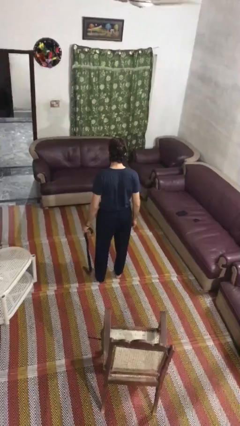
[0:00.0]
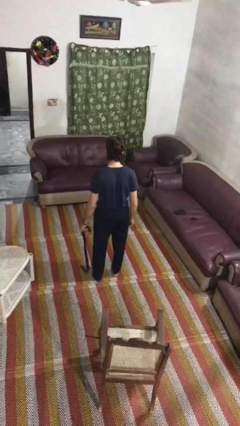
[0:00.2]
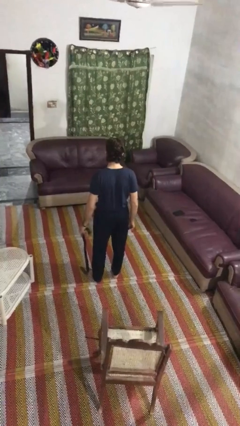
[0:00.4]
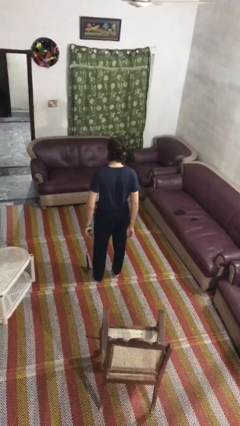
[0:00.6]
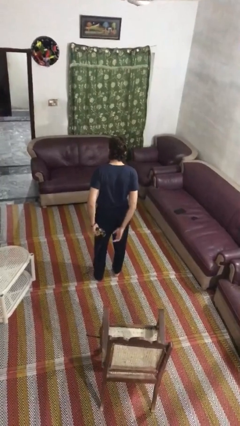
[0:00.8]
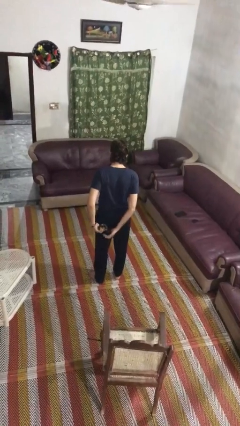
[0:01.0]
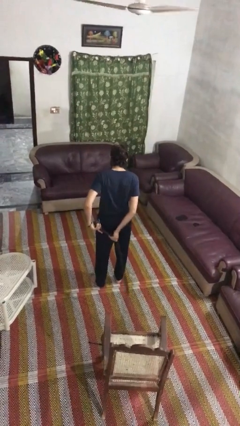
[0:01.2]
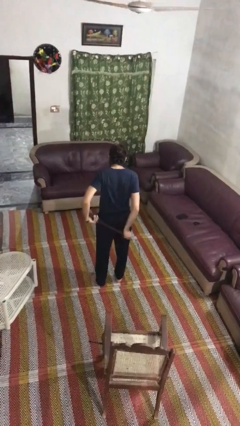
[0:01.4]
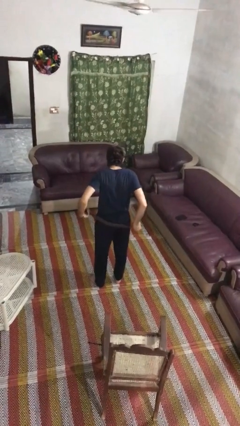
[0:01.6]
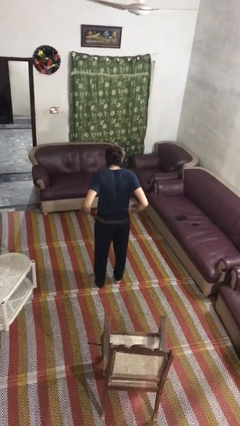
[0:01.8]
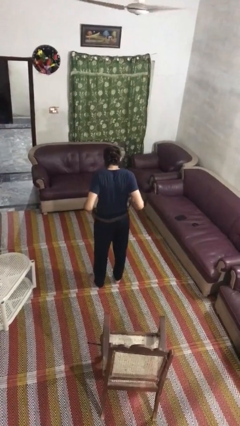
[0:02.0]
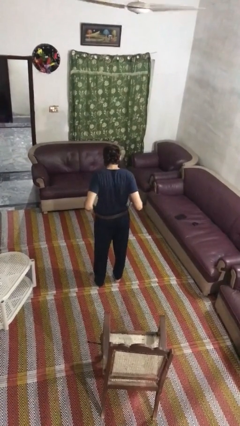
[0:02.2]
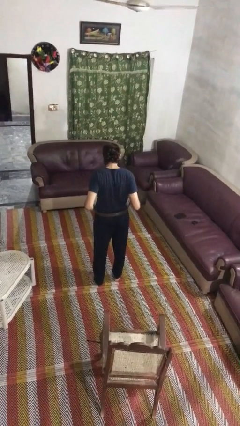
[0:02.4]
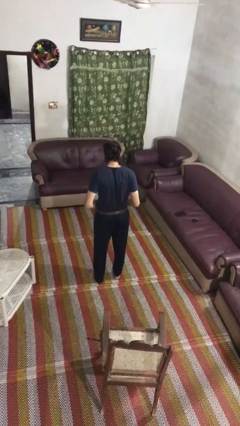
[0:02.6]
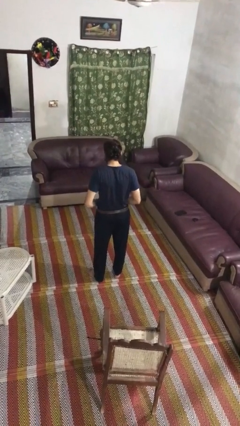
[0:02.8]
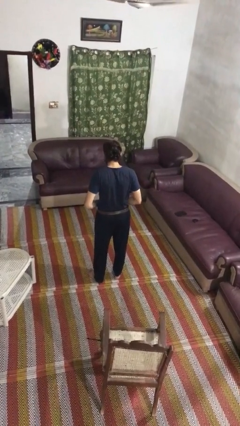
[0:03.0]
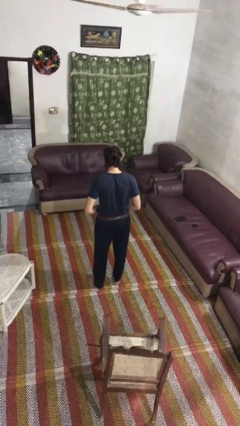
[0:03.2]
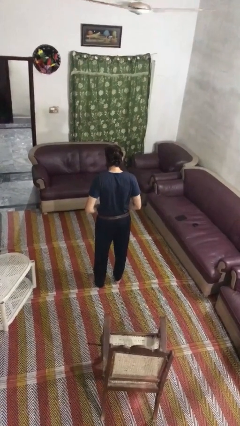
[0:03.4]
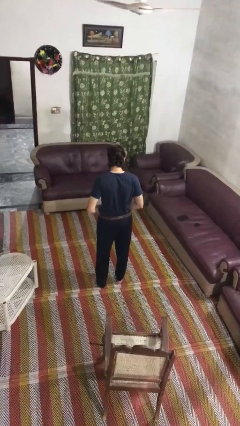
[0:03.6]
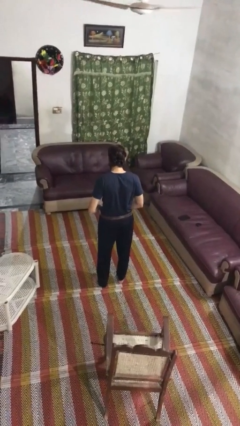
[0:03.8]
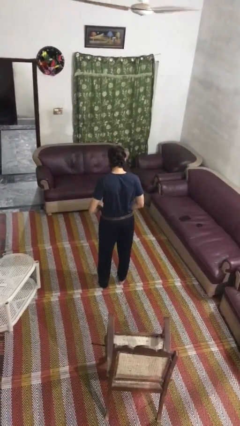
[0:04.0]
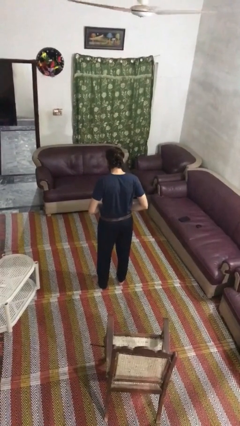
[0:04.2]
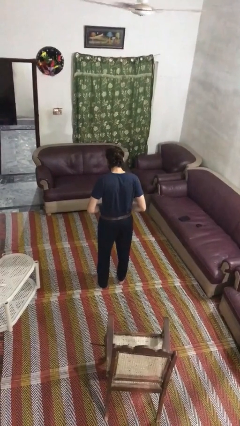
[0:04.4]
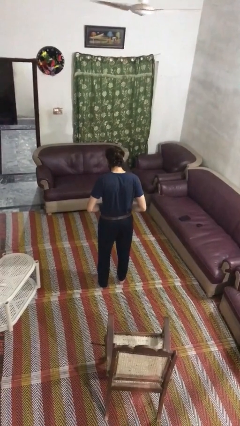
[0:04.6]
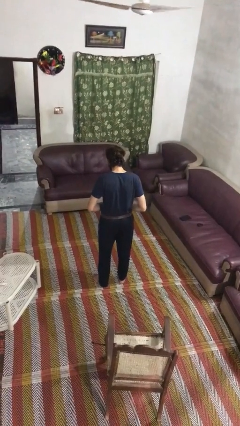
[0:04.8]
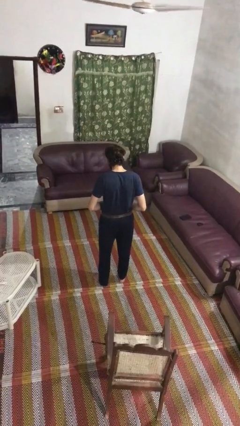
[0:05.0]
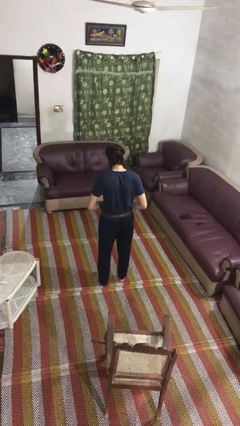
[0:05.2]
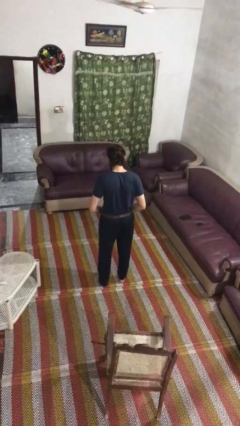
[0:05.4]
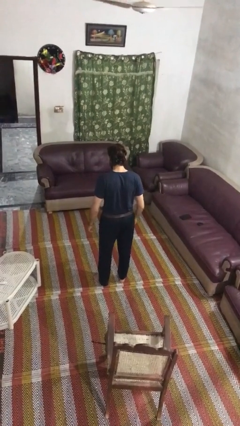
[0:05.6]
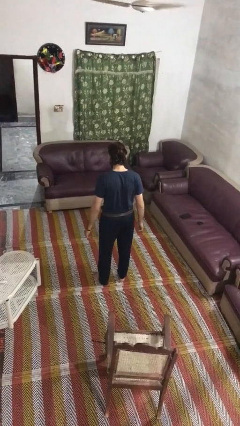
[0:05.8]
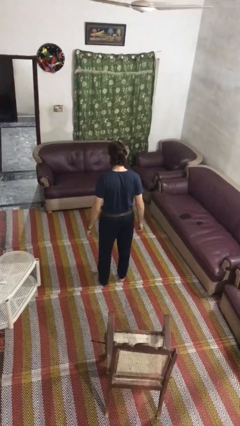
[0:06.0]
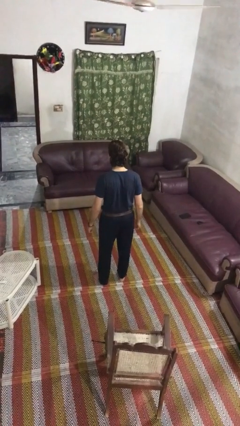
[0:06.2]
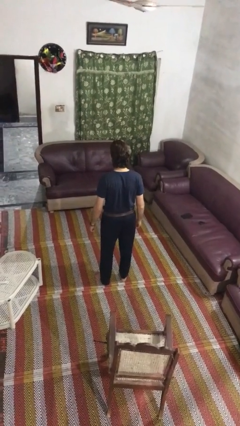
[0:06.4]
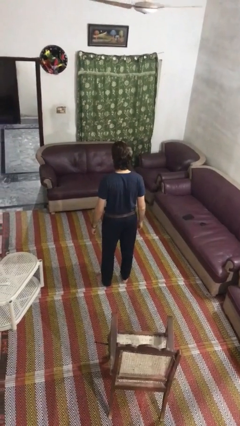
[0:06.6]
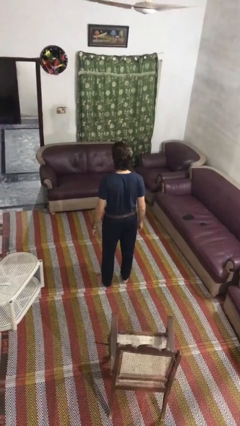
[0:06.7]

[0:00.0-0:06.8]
person puts on belt

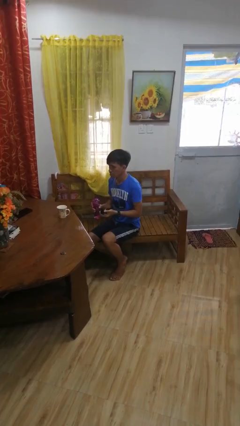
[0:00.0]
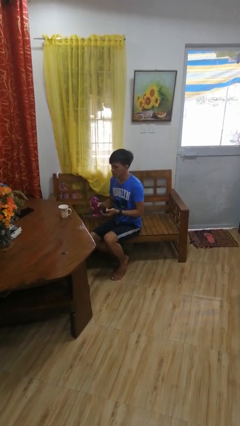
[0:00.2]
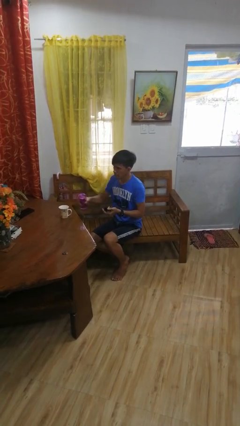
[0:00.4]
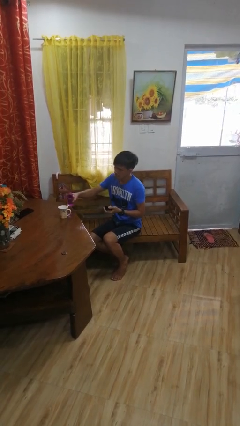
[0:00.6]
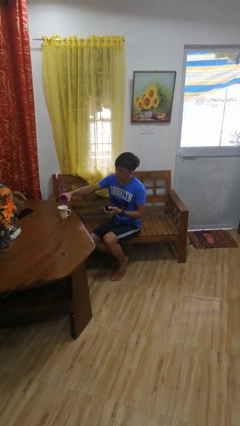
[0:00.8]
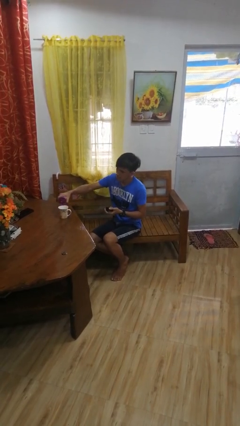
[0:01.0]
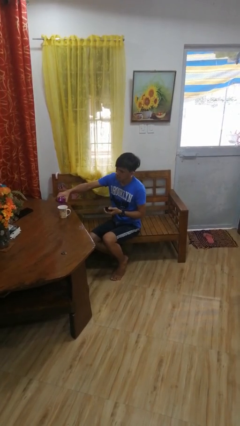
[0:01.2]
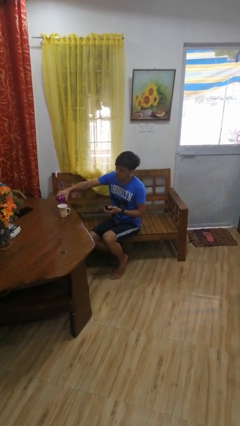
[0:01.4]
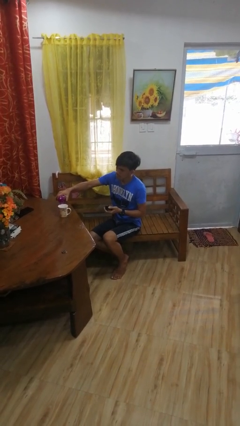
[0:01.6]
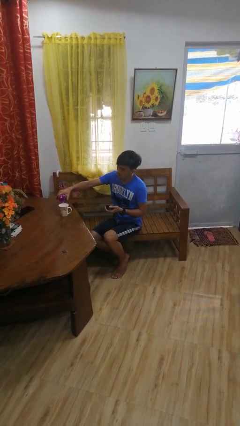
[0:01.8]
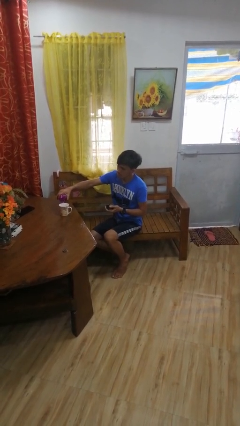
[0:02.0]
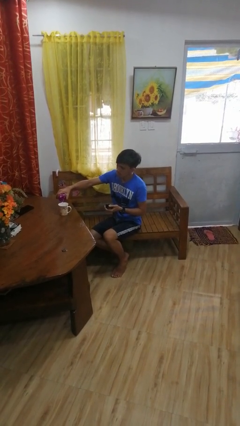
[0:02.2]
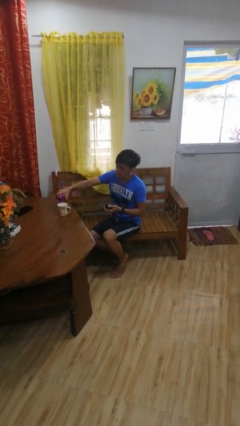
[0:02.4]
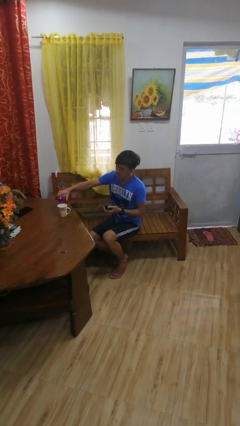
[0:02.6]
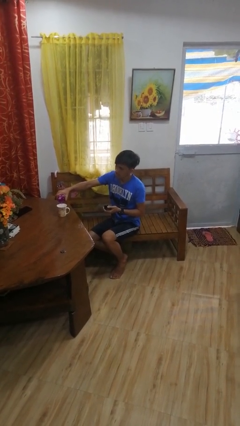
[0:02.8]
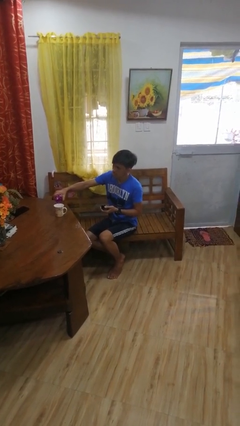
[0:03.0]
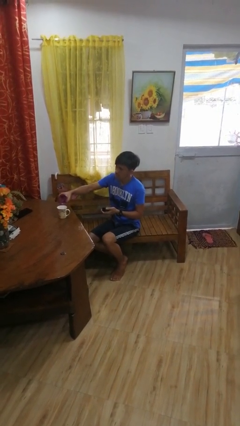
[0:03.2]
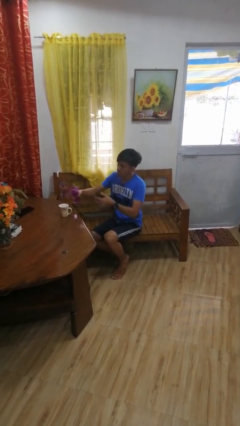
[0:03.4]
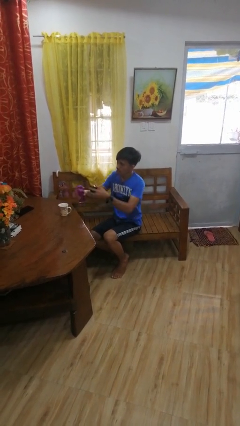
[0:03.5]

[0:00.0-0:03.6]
person pours liquid into cup

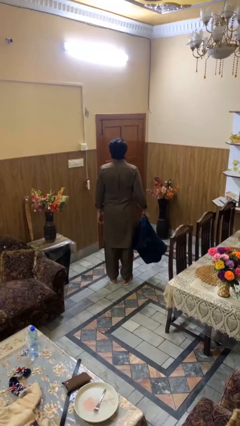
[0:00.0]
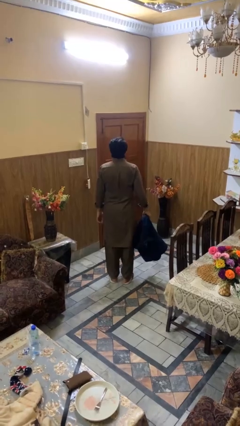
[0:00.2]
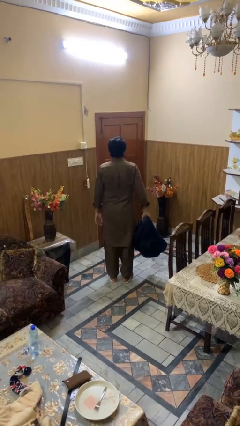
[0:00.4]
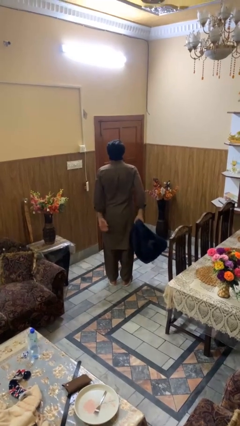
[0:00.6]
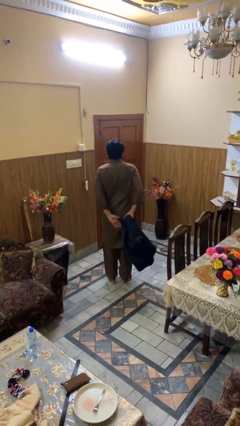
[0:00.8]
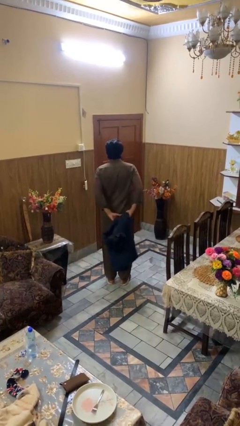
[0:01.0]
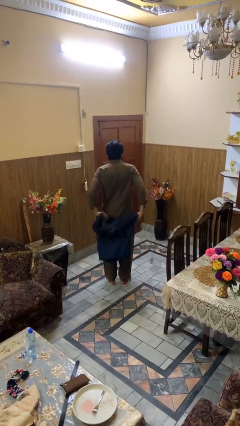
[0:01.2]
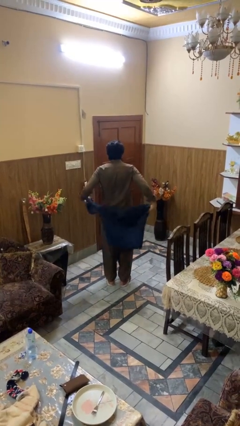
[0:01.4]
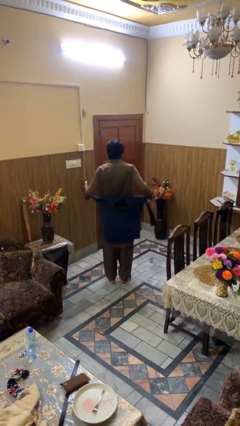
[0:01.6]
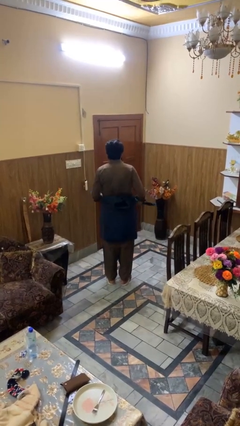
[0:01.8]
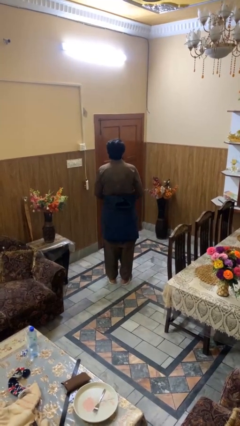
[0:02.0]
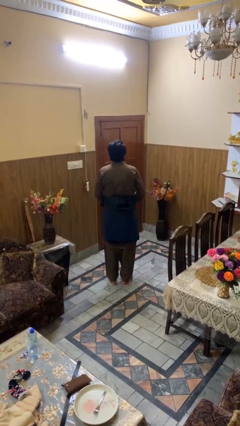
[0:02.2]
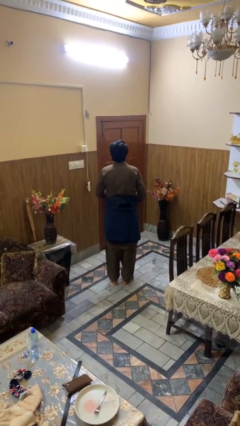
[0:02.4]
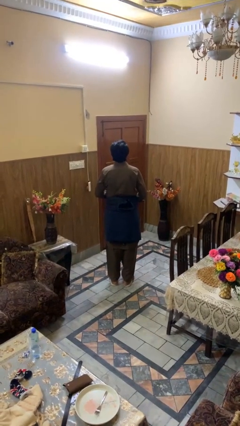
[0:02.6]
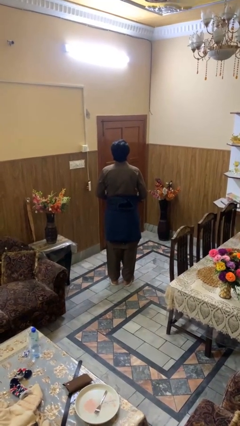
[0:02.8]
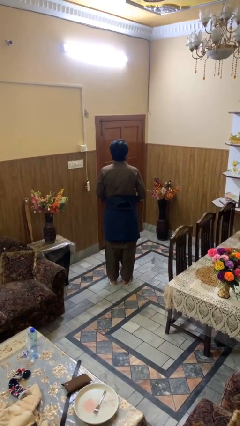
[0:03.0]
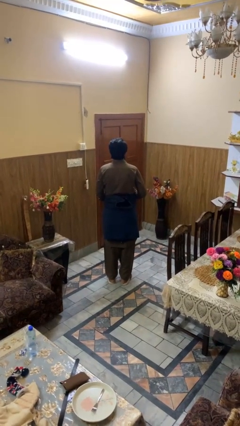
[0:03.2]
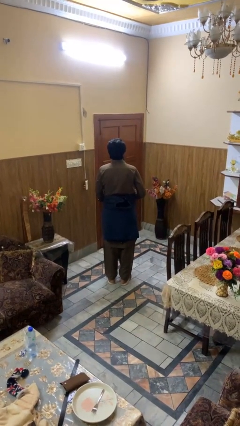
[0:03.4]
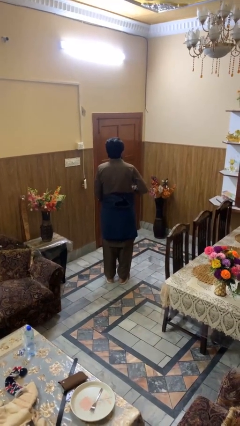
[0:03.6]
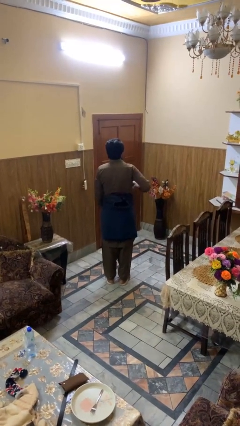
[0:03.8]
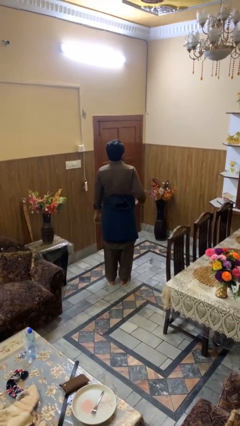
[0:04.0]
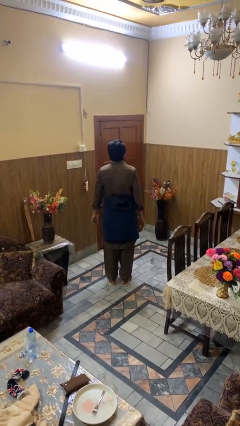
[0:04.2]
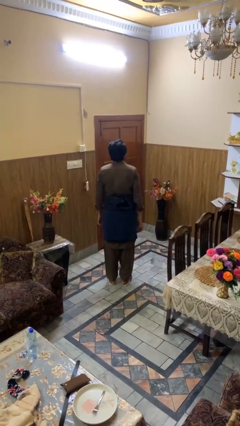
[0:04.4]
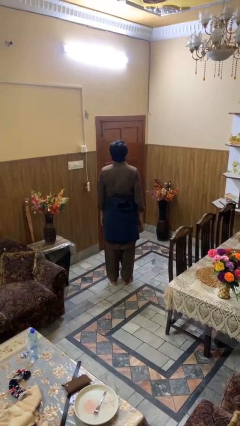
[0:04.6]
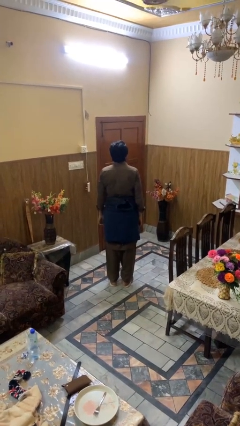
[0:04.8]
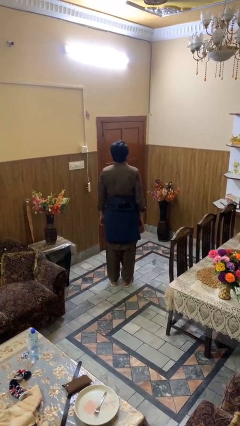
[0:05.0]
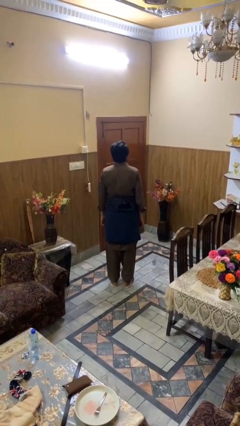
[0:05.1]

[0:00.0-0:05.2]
person ties jacket around waist

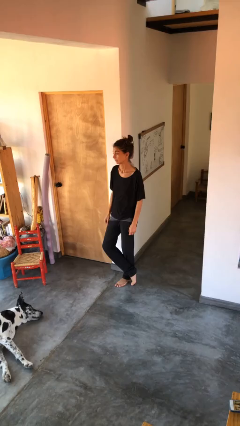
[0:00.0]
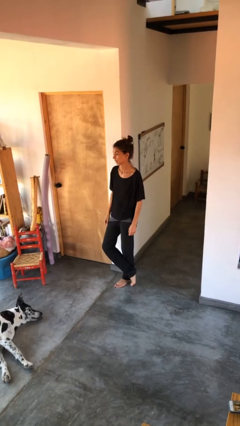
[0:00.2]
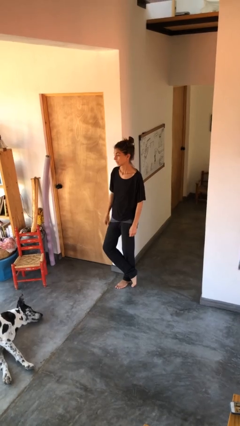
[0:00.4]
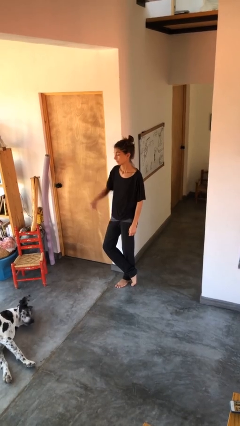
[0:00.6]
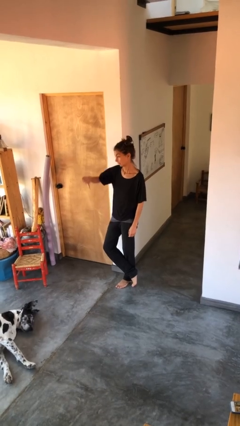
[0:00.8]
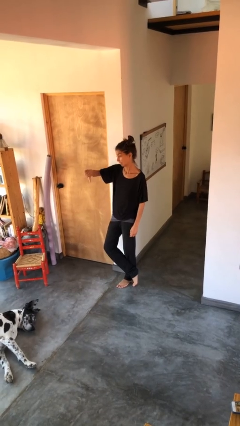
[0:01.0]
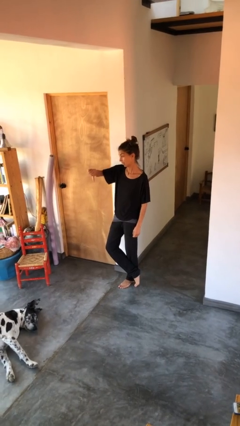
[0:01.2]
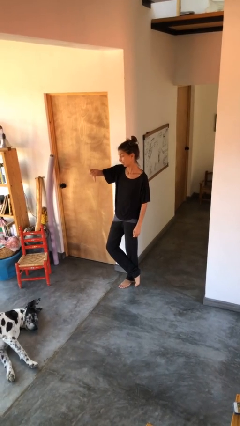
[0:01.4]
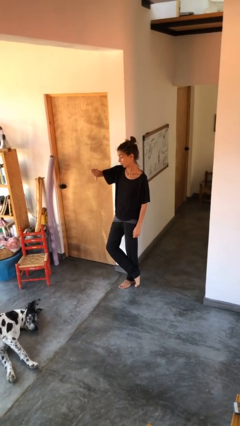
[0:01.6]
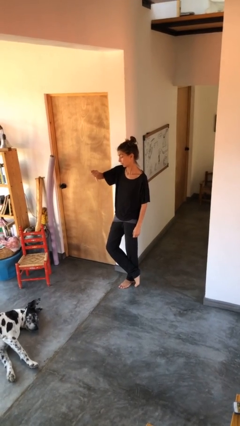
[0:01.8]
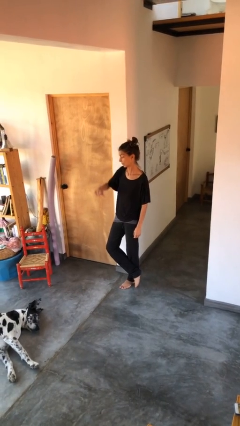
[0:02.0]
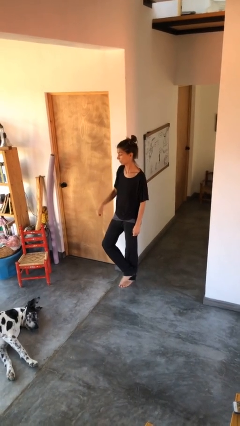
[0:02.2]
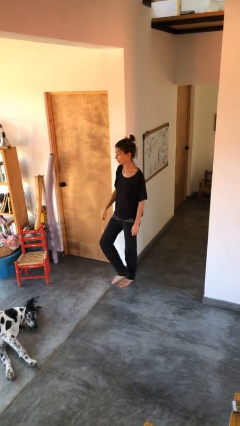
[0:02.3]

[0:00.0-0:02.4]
person gestures thumbs down
